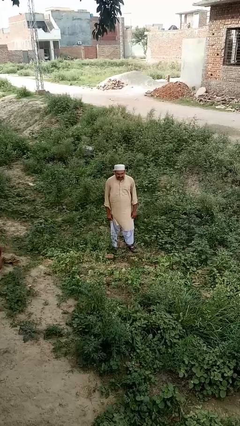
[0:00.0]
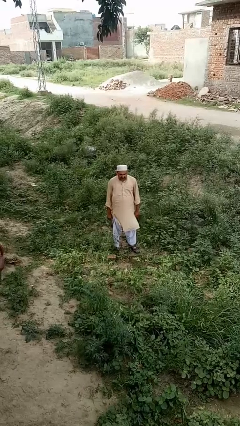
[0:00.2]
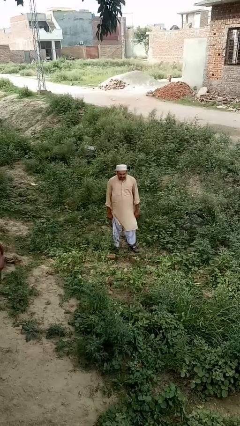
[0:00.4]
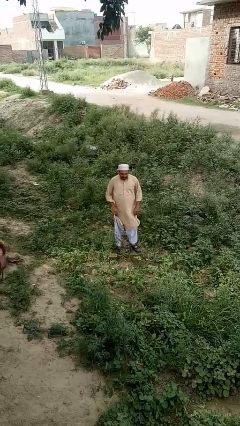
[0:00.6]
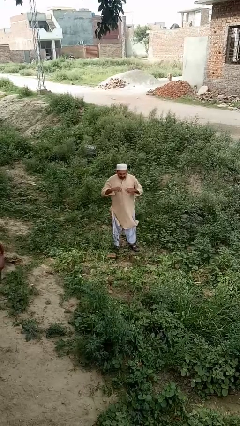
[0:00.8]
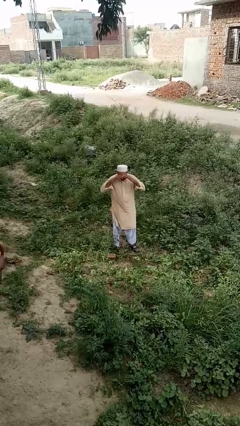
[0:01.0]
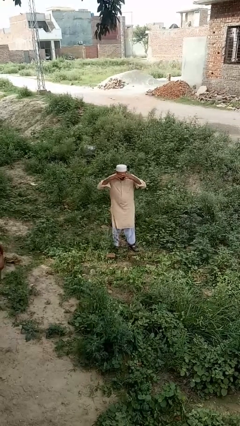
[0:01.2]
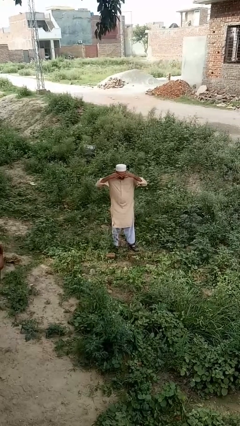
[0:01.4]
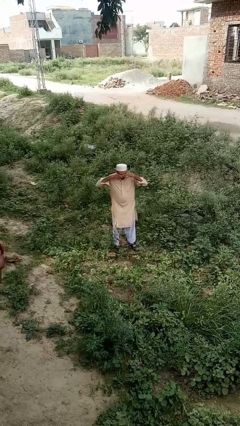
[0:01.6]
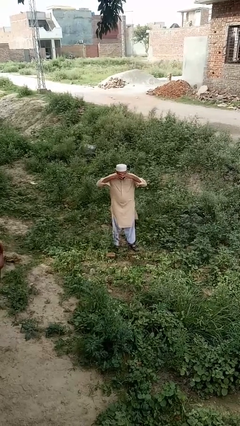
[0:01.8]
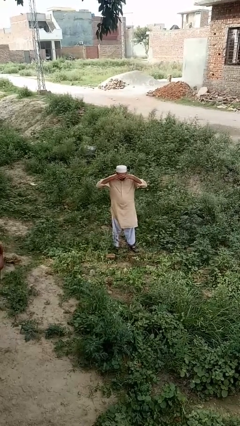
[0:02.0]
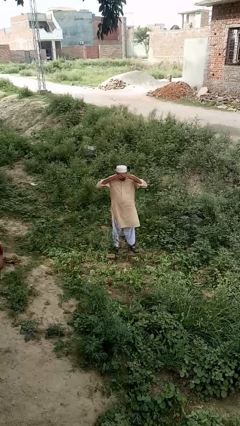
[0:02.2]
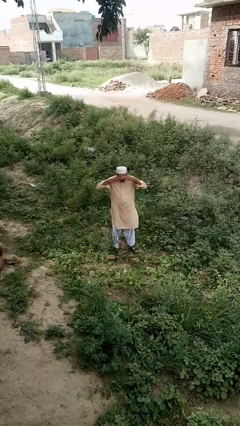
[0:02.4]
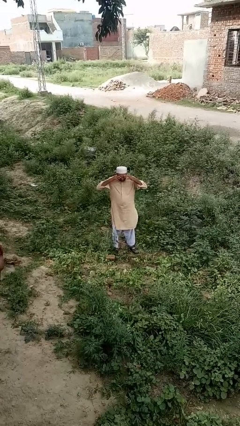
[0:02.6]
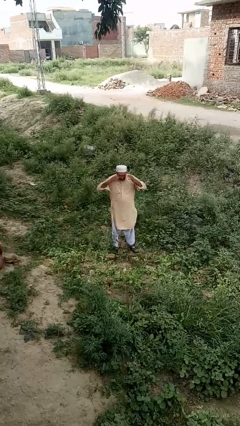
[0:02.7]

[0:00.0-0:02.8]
person rubs eyes

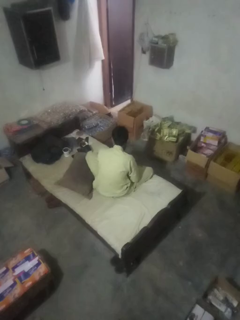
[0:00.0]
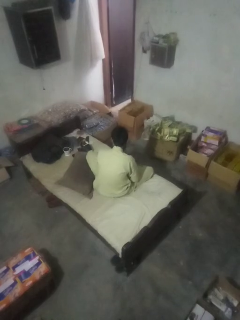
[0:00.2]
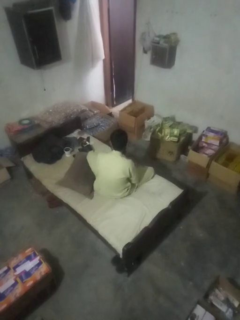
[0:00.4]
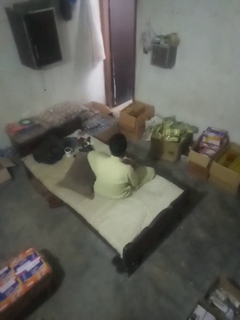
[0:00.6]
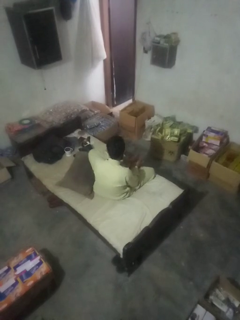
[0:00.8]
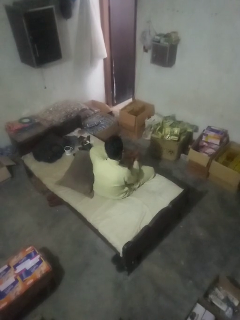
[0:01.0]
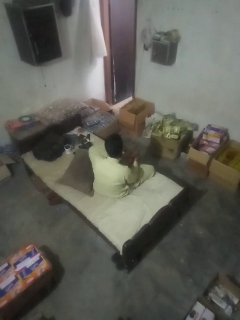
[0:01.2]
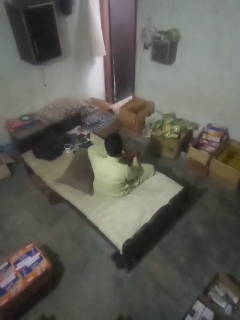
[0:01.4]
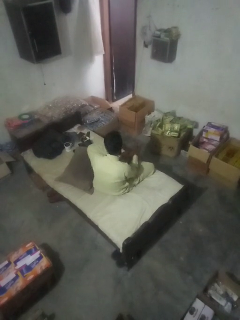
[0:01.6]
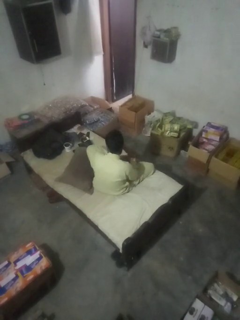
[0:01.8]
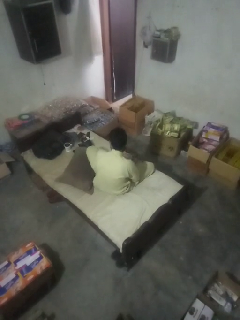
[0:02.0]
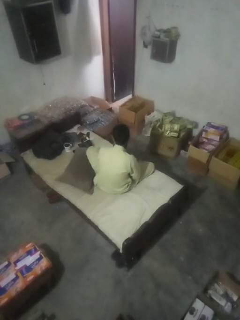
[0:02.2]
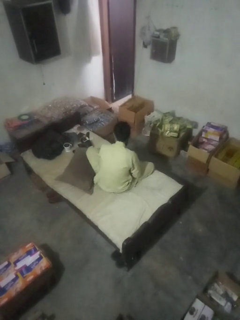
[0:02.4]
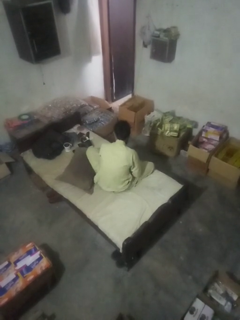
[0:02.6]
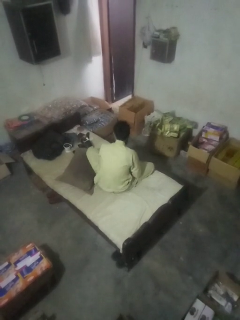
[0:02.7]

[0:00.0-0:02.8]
person rubs foot

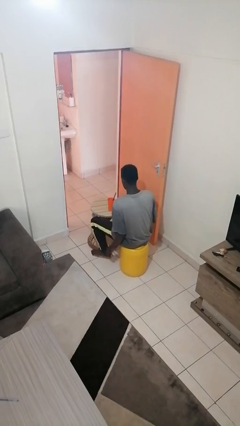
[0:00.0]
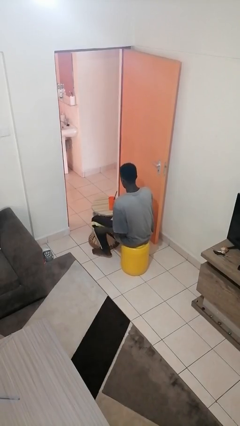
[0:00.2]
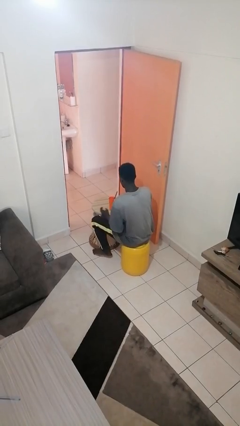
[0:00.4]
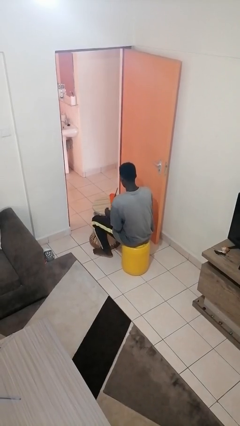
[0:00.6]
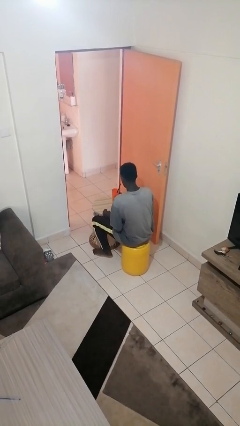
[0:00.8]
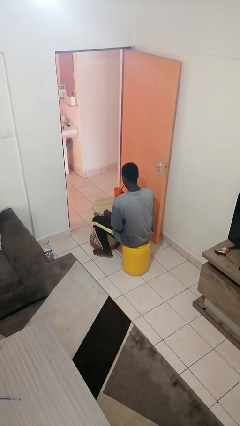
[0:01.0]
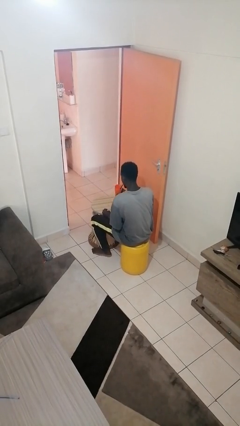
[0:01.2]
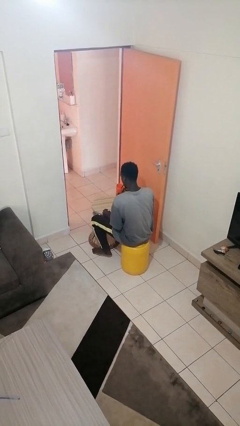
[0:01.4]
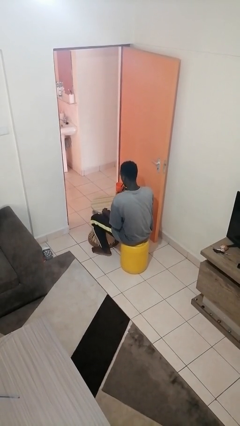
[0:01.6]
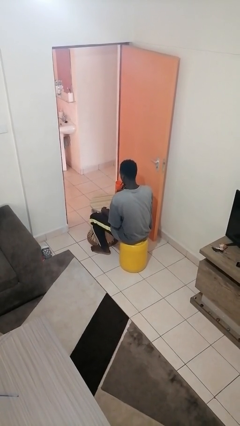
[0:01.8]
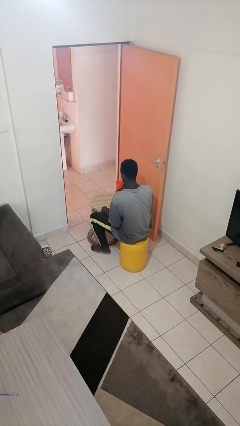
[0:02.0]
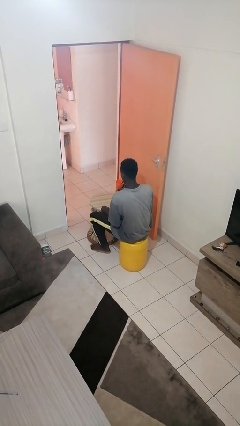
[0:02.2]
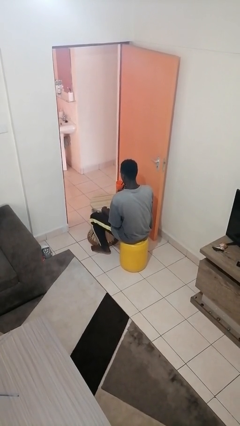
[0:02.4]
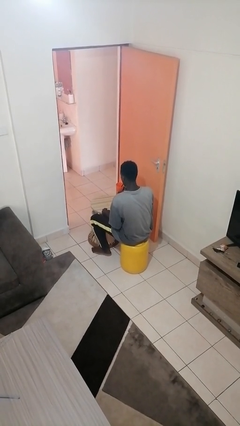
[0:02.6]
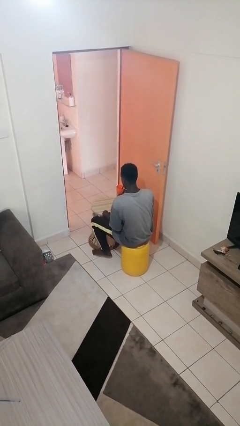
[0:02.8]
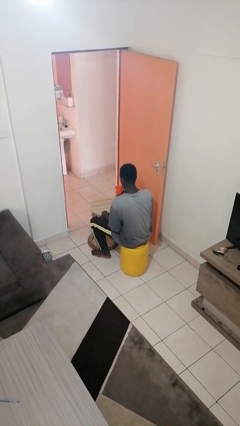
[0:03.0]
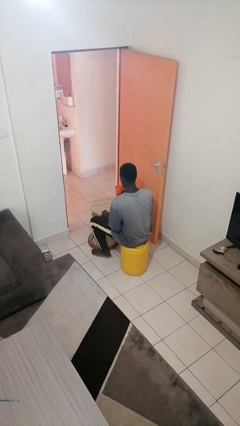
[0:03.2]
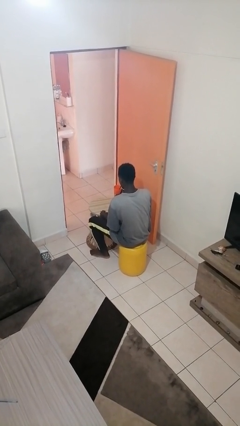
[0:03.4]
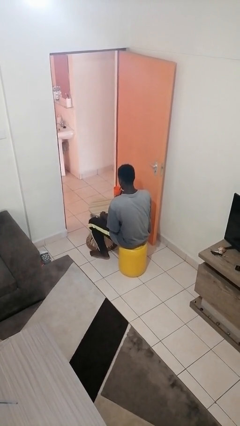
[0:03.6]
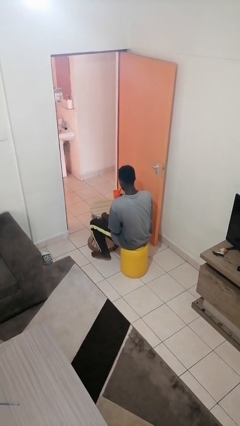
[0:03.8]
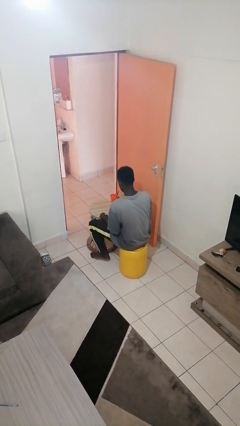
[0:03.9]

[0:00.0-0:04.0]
person drinks from straw

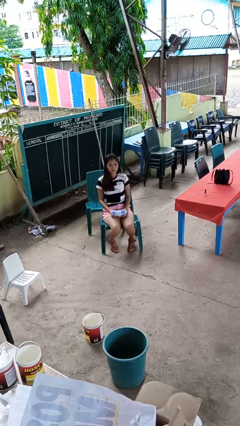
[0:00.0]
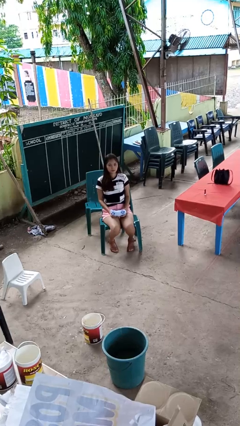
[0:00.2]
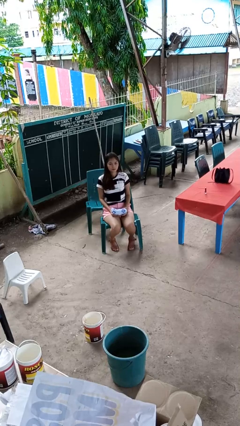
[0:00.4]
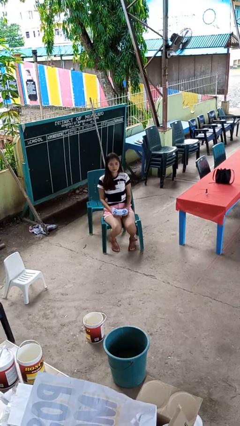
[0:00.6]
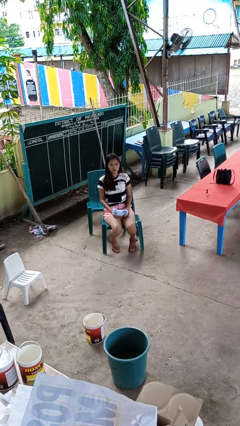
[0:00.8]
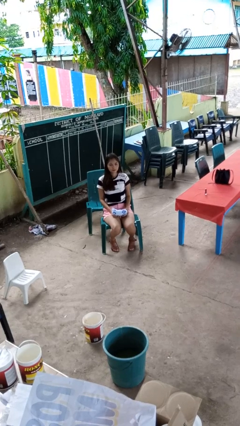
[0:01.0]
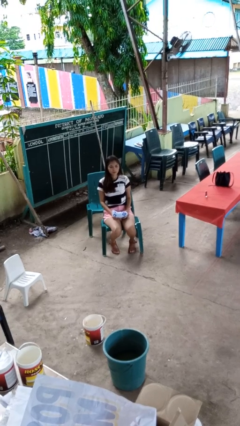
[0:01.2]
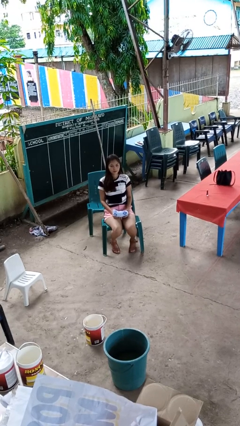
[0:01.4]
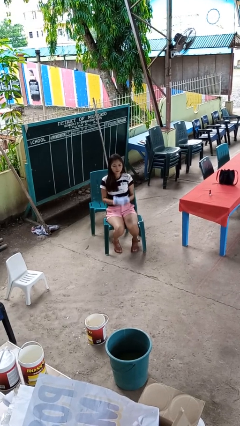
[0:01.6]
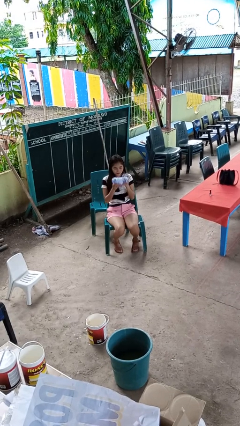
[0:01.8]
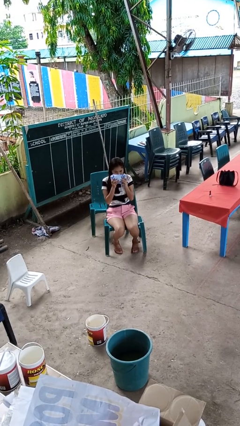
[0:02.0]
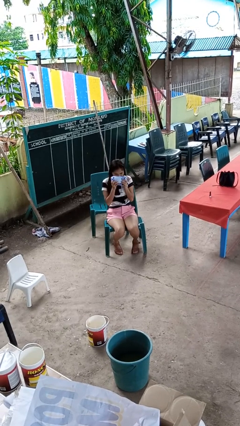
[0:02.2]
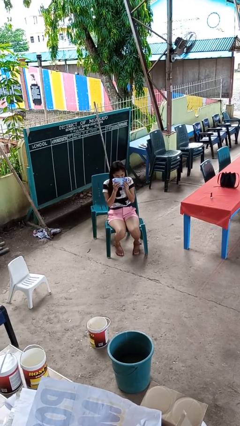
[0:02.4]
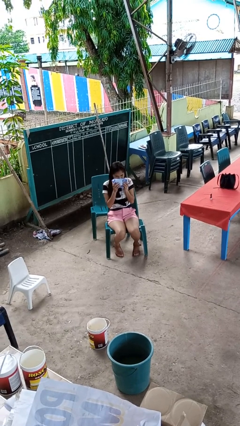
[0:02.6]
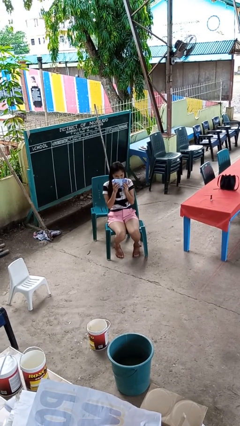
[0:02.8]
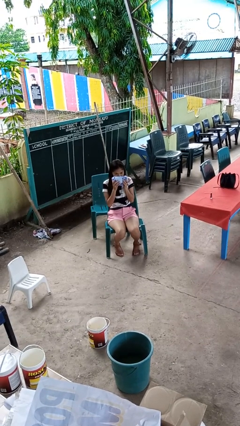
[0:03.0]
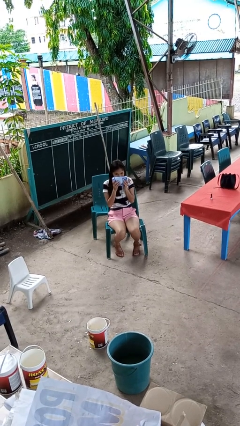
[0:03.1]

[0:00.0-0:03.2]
person blows nose

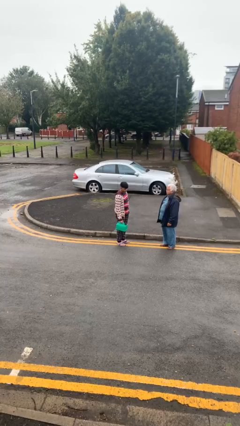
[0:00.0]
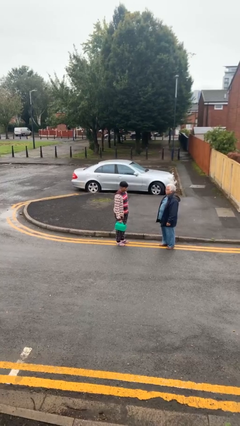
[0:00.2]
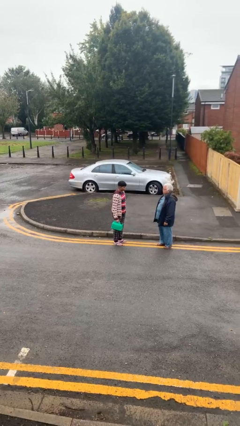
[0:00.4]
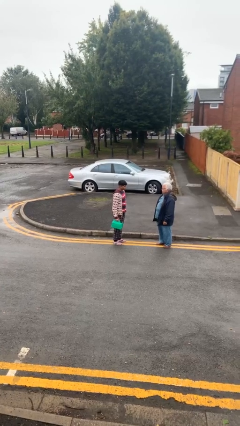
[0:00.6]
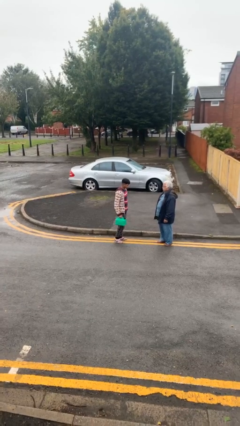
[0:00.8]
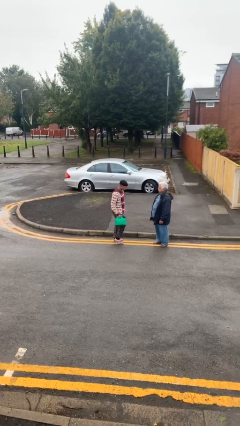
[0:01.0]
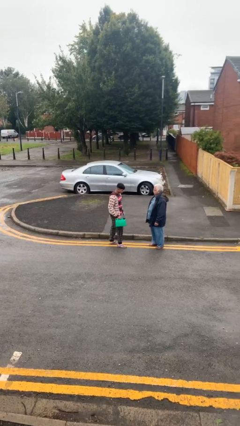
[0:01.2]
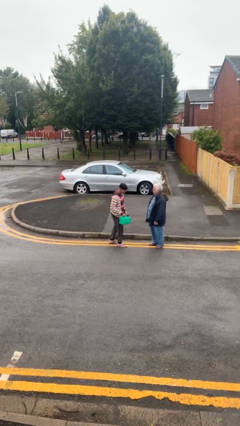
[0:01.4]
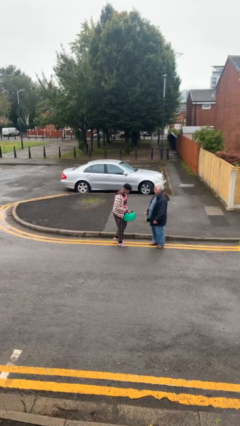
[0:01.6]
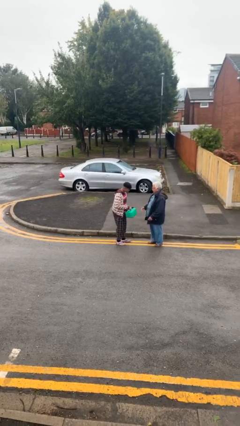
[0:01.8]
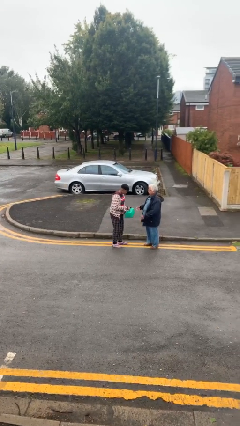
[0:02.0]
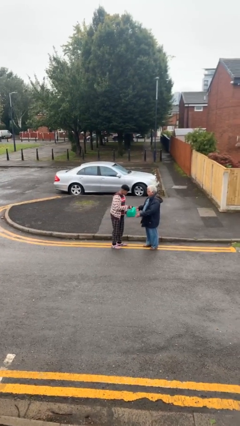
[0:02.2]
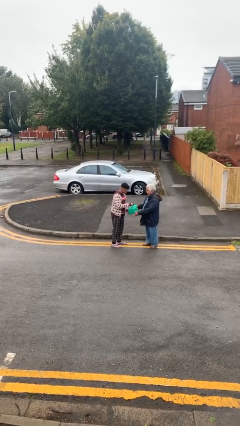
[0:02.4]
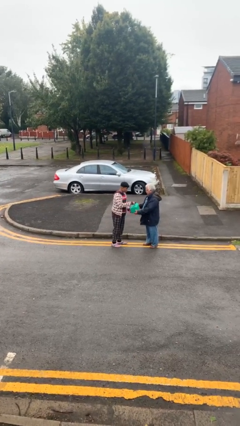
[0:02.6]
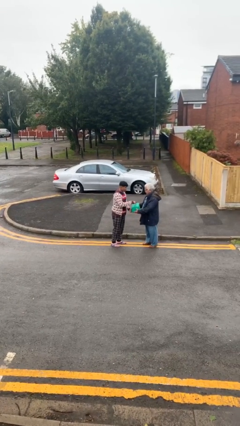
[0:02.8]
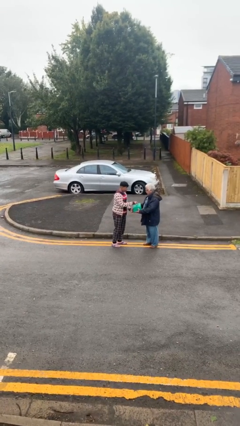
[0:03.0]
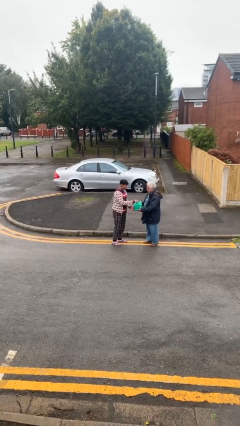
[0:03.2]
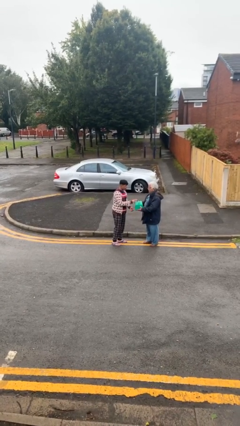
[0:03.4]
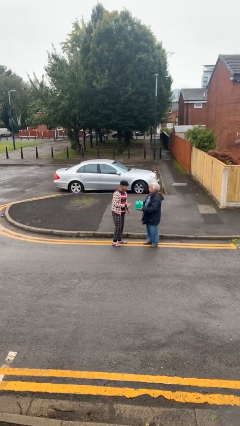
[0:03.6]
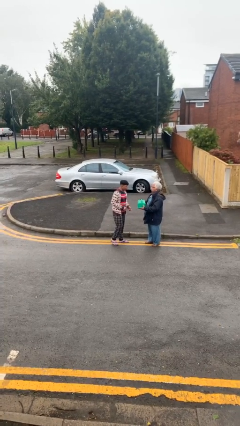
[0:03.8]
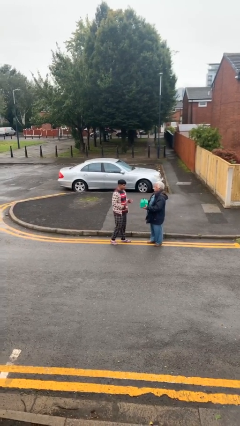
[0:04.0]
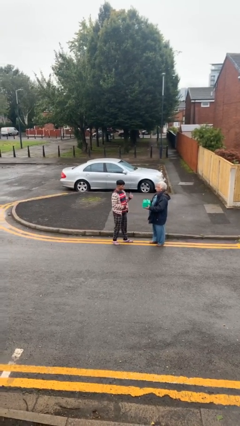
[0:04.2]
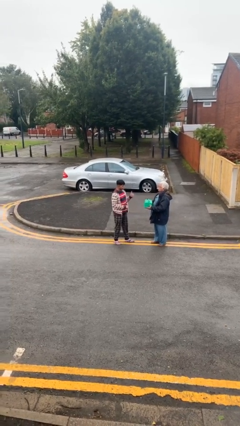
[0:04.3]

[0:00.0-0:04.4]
person transfers object to person

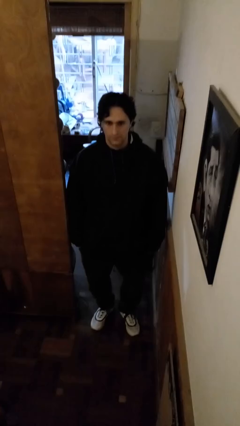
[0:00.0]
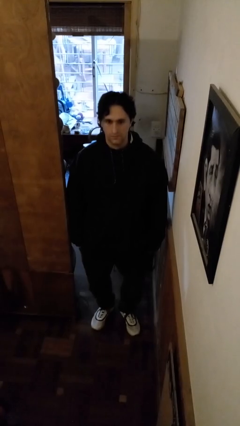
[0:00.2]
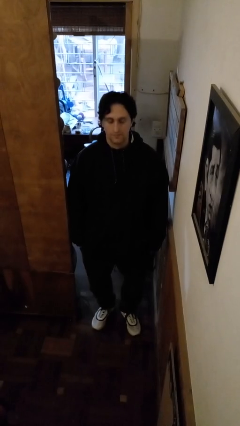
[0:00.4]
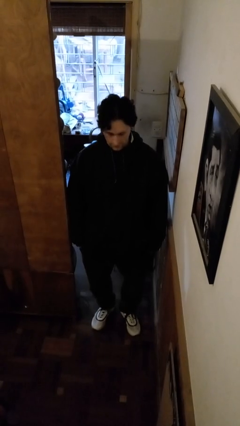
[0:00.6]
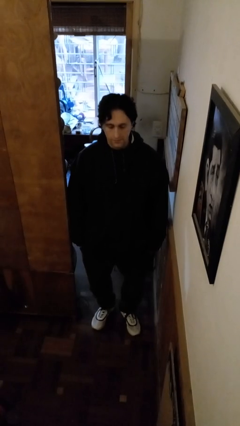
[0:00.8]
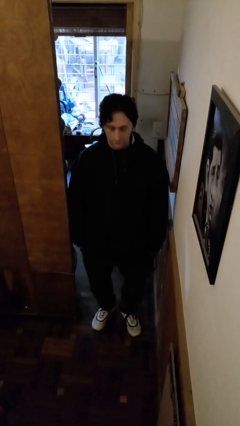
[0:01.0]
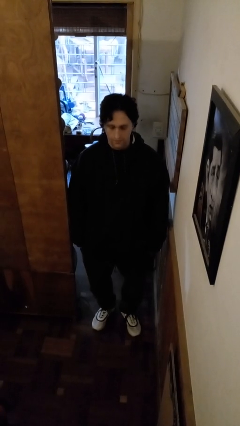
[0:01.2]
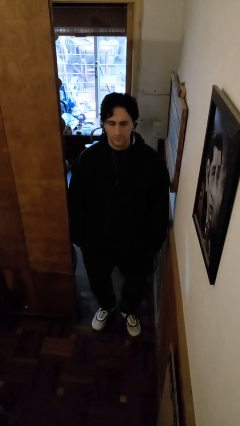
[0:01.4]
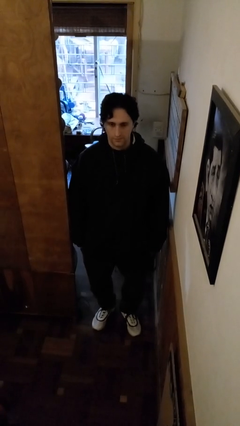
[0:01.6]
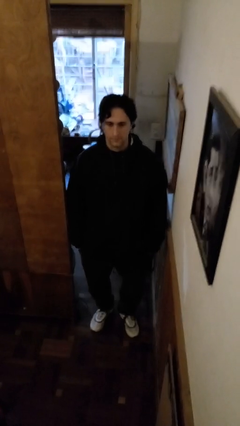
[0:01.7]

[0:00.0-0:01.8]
person nods head
